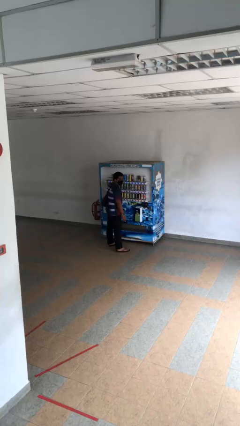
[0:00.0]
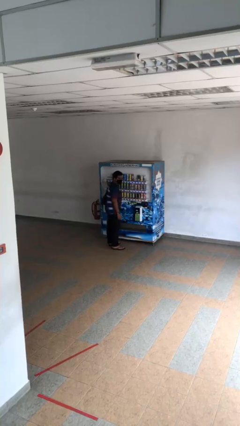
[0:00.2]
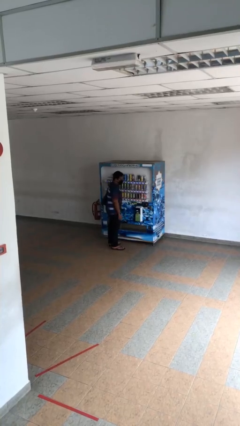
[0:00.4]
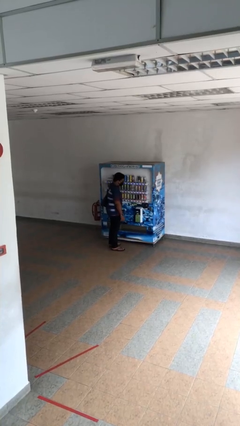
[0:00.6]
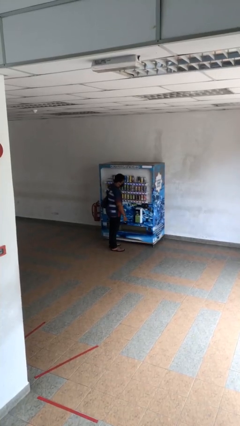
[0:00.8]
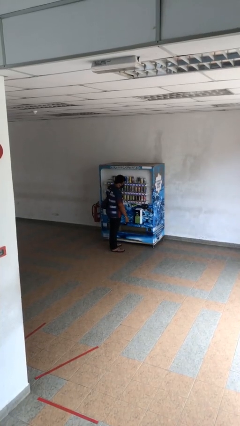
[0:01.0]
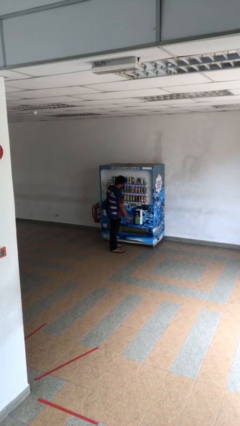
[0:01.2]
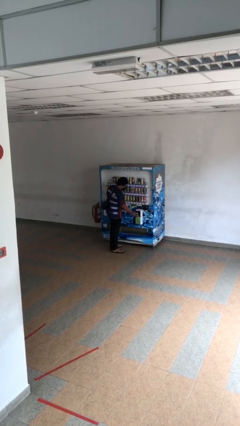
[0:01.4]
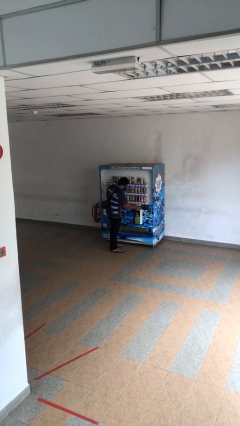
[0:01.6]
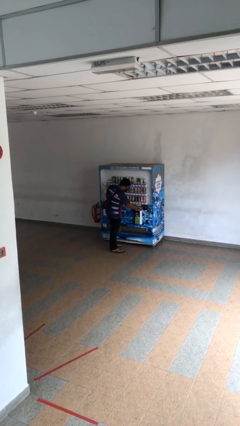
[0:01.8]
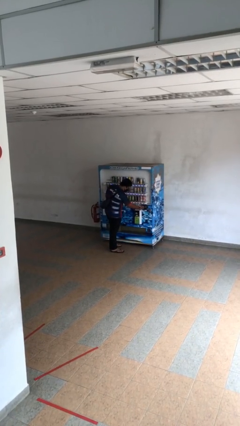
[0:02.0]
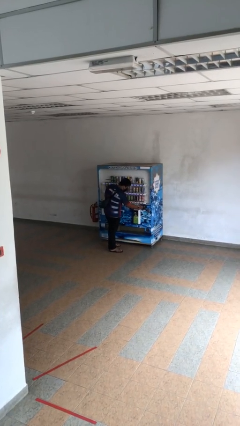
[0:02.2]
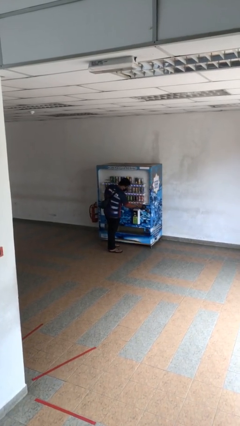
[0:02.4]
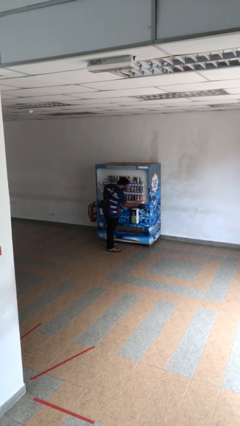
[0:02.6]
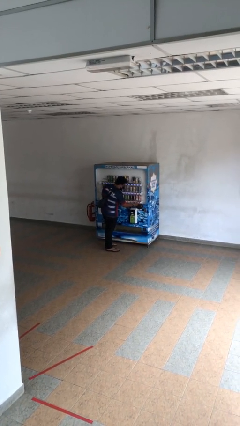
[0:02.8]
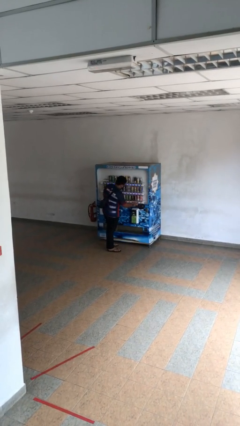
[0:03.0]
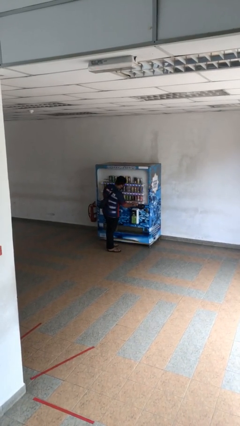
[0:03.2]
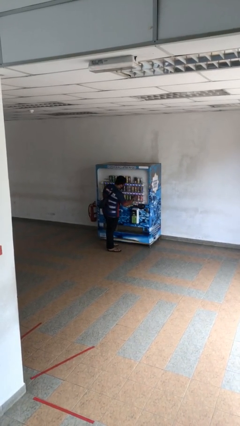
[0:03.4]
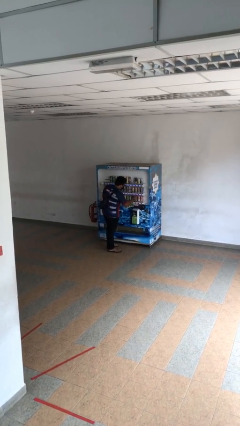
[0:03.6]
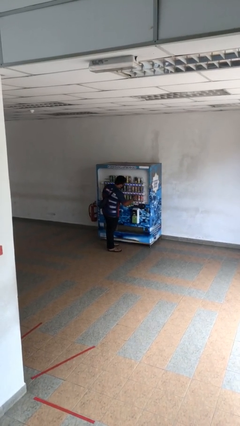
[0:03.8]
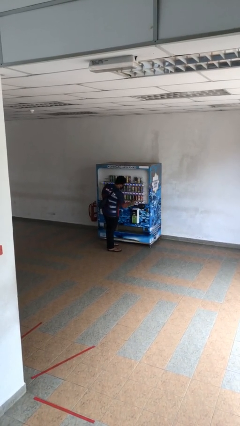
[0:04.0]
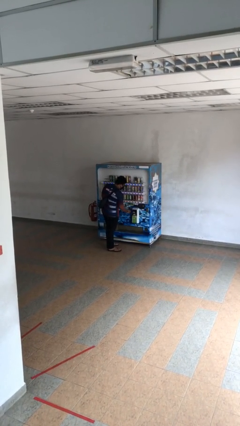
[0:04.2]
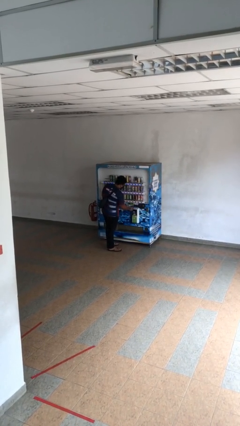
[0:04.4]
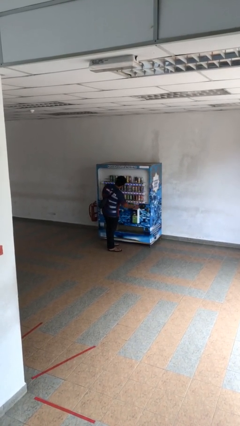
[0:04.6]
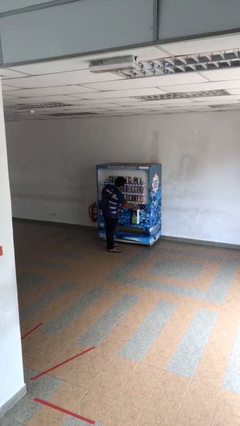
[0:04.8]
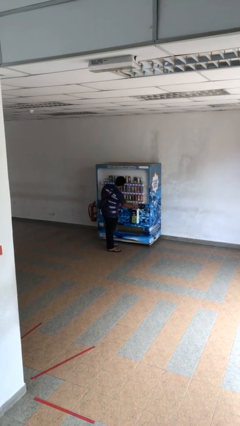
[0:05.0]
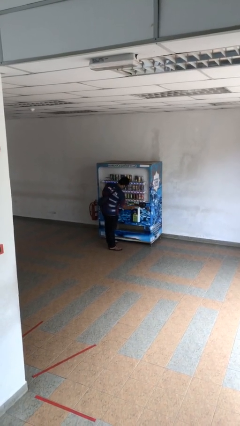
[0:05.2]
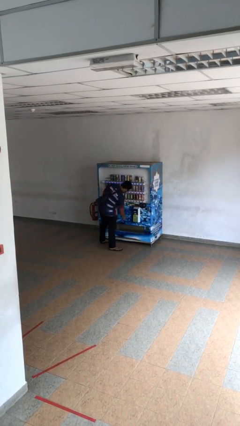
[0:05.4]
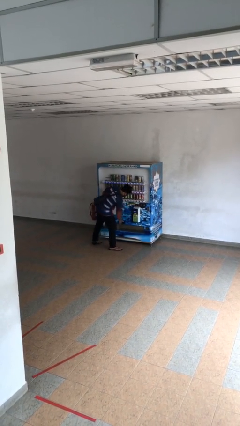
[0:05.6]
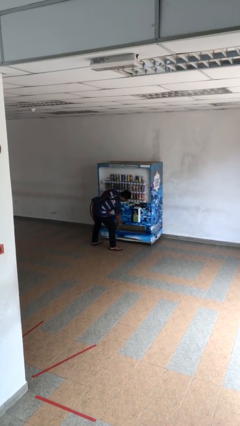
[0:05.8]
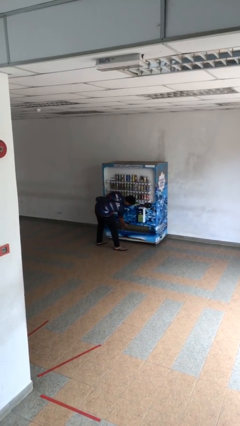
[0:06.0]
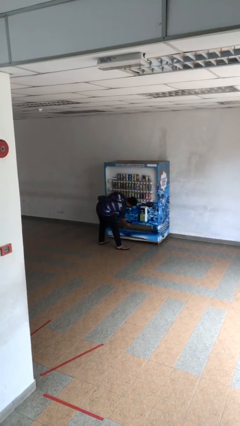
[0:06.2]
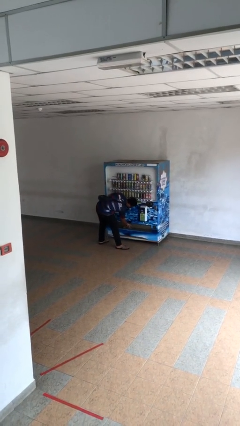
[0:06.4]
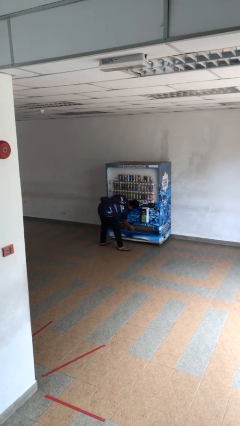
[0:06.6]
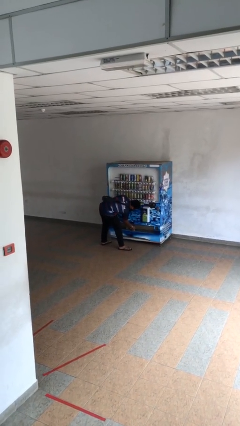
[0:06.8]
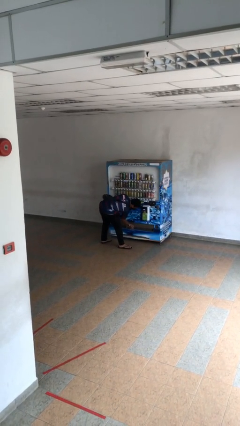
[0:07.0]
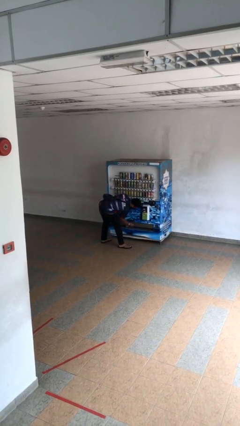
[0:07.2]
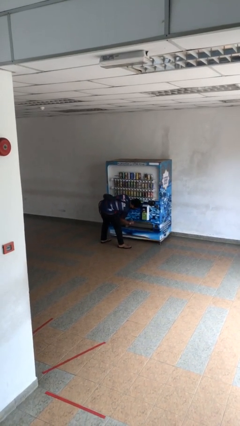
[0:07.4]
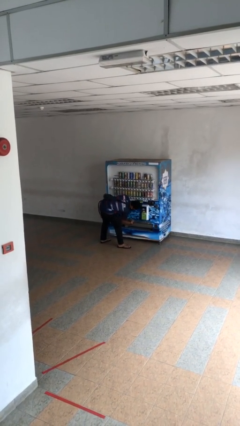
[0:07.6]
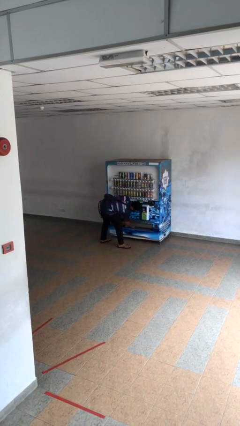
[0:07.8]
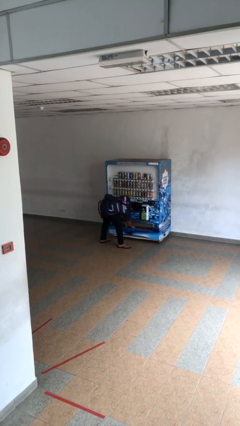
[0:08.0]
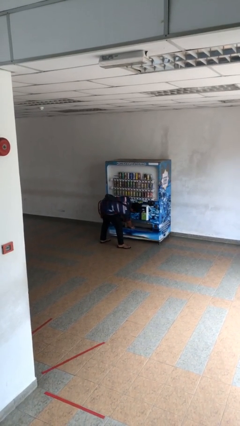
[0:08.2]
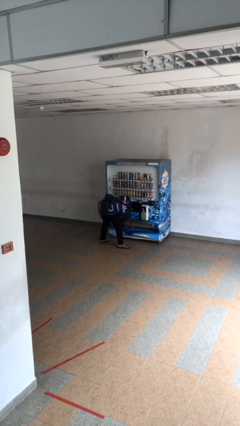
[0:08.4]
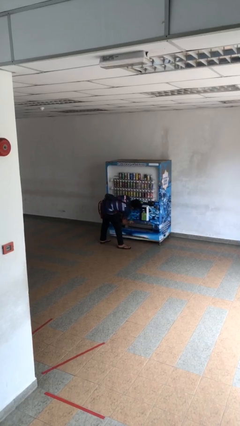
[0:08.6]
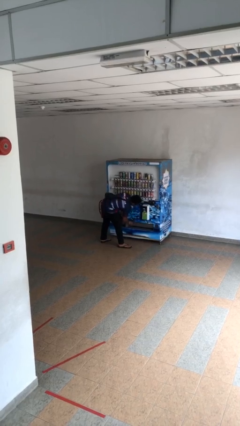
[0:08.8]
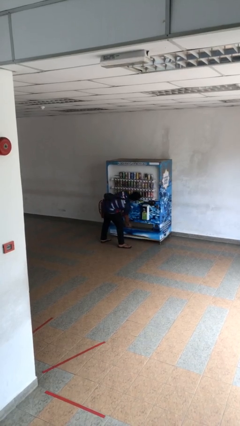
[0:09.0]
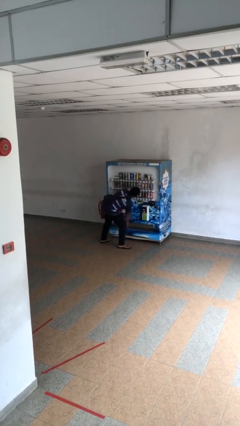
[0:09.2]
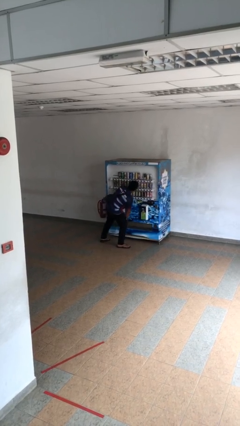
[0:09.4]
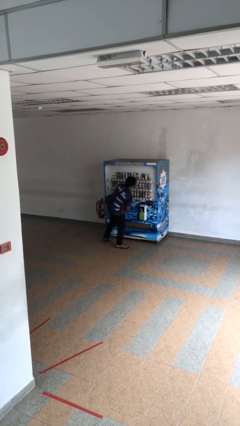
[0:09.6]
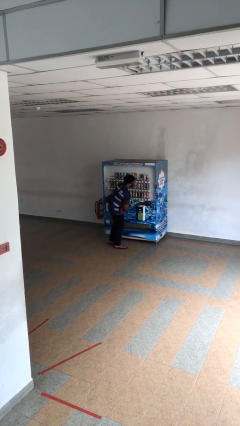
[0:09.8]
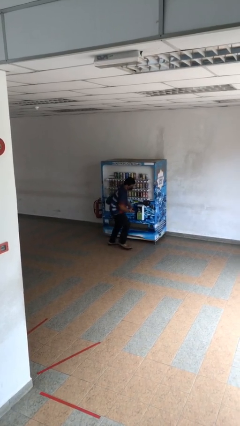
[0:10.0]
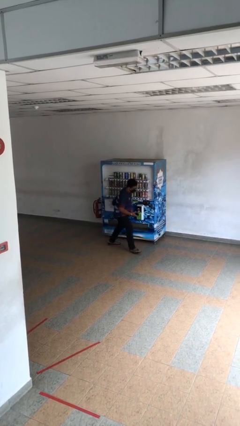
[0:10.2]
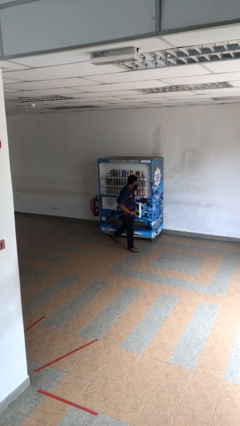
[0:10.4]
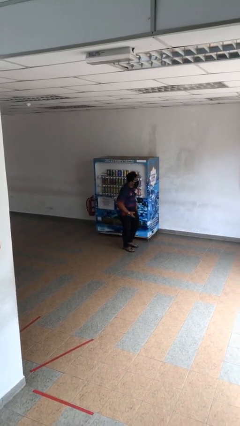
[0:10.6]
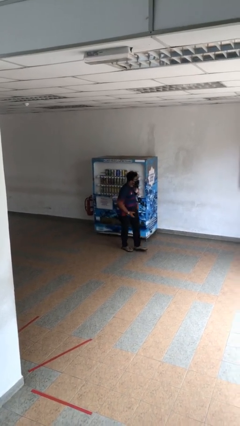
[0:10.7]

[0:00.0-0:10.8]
person purchases from machine

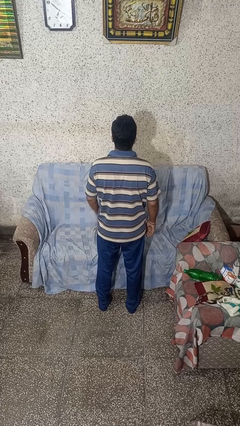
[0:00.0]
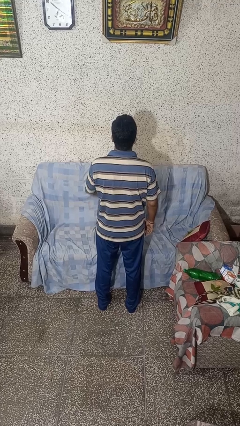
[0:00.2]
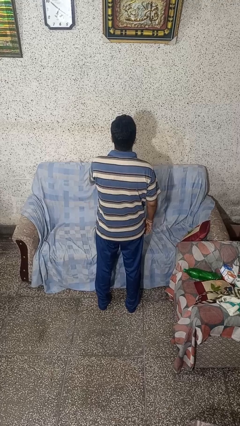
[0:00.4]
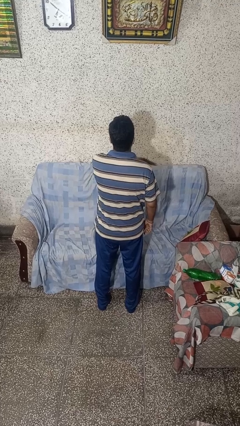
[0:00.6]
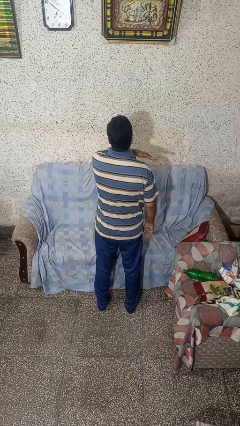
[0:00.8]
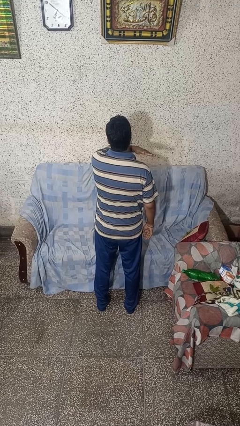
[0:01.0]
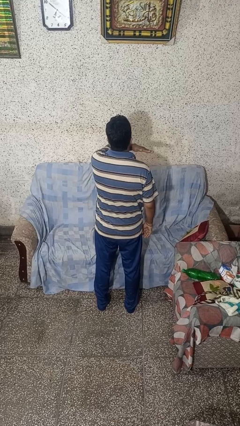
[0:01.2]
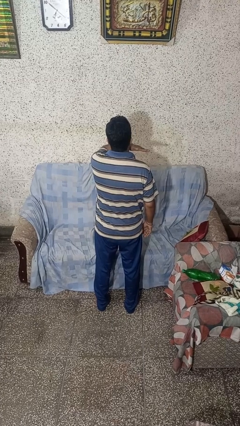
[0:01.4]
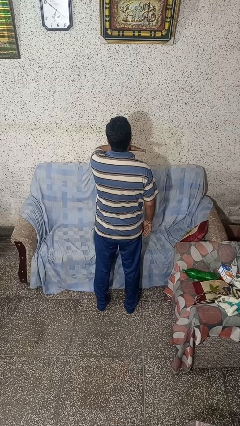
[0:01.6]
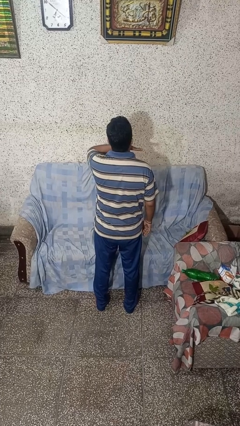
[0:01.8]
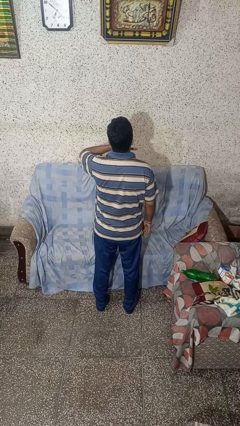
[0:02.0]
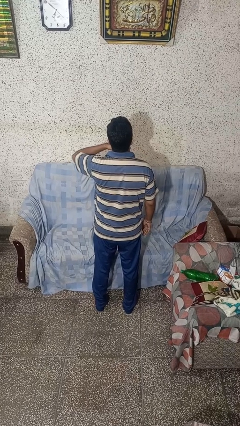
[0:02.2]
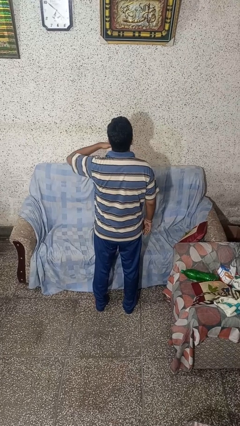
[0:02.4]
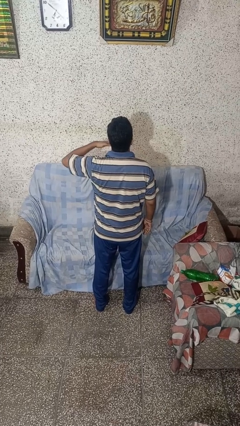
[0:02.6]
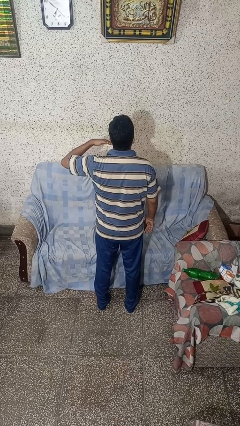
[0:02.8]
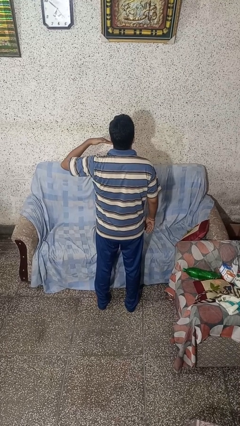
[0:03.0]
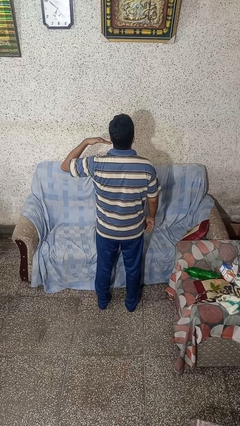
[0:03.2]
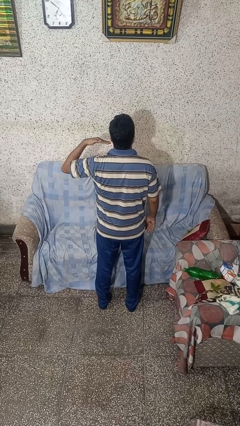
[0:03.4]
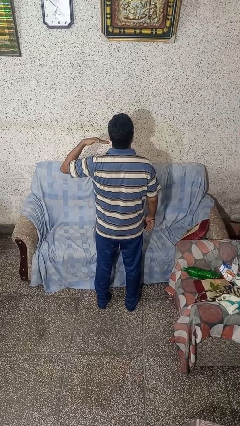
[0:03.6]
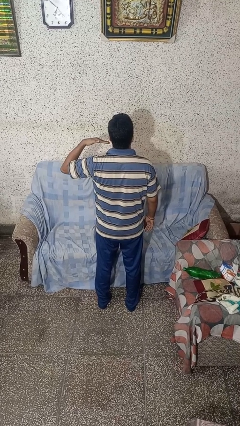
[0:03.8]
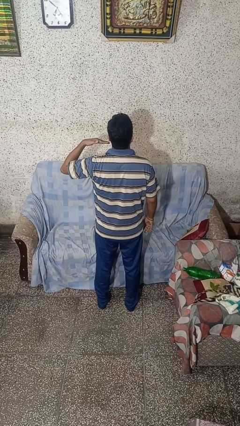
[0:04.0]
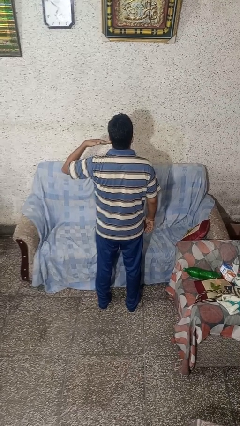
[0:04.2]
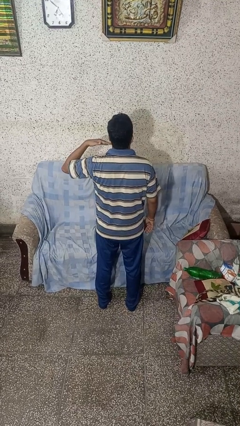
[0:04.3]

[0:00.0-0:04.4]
person gestures cut

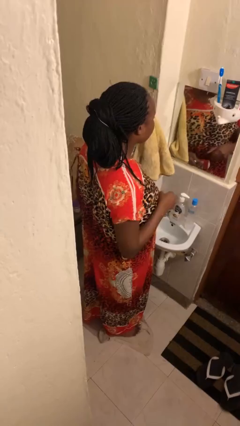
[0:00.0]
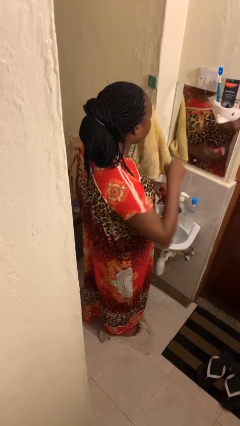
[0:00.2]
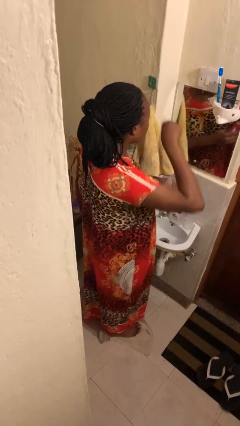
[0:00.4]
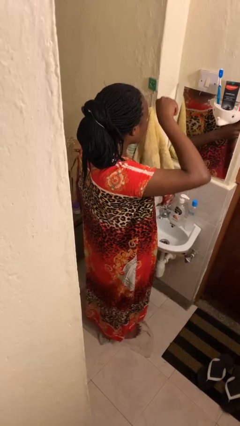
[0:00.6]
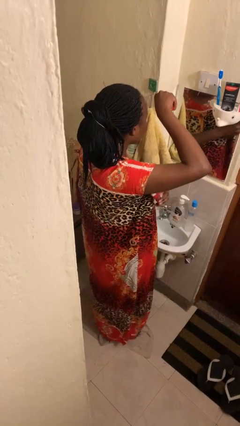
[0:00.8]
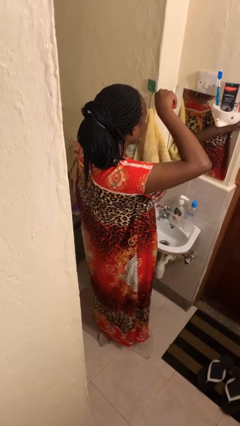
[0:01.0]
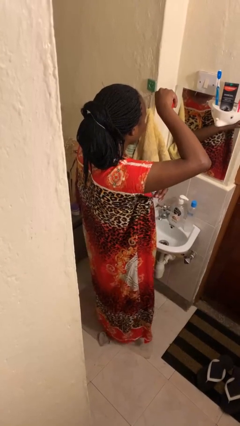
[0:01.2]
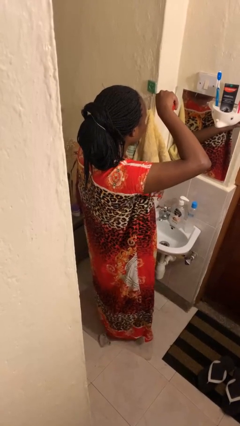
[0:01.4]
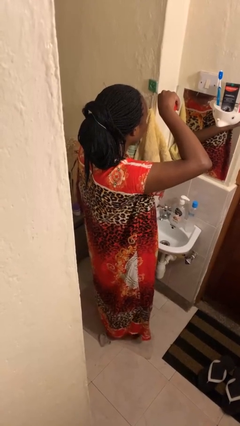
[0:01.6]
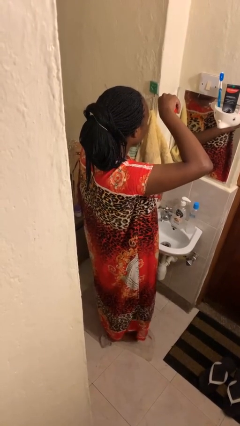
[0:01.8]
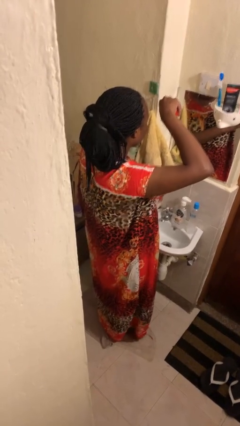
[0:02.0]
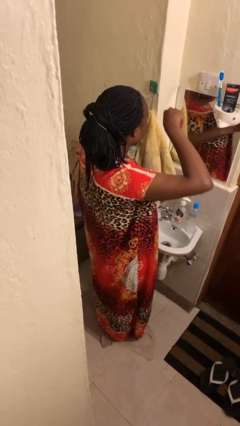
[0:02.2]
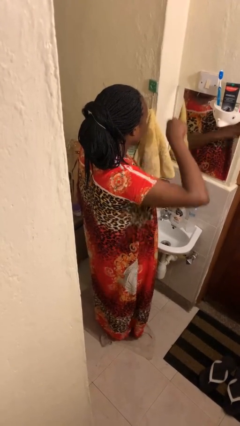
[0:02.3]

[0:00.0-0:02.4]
person applies deodorant

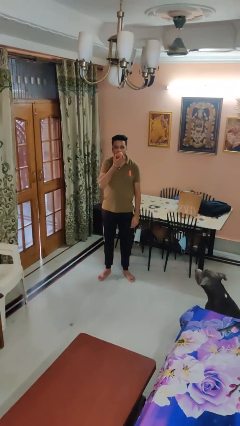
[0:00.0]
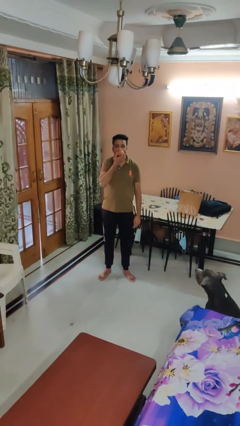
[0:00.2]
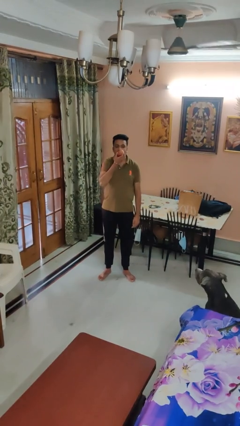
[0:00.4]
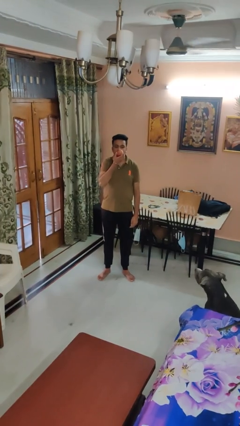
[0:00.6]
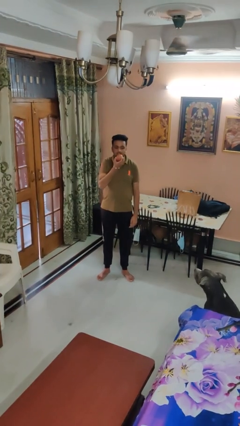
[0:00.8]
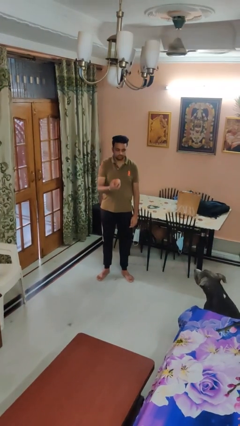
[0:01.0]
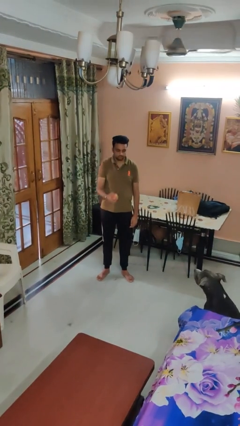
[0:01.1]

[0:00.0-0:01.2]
person eats apple
